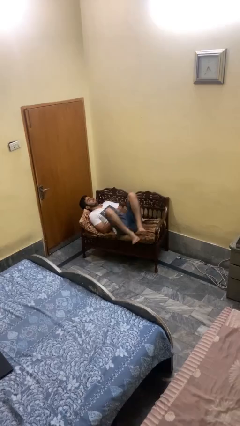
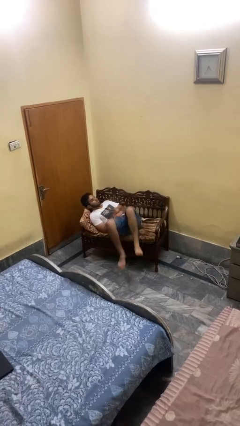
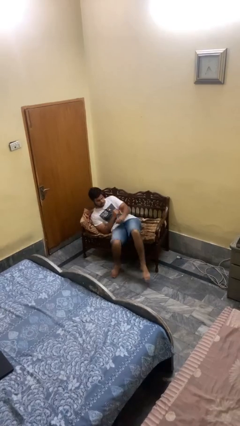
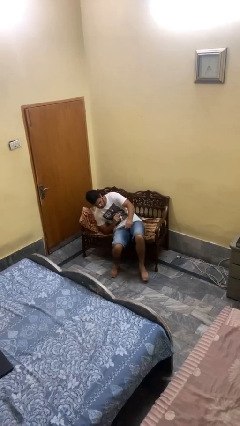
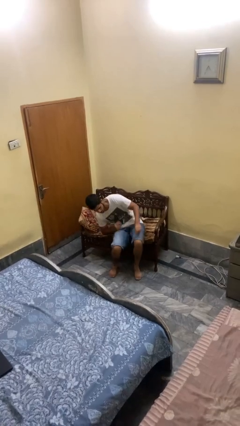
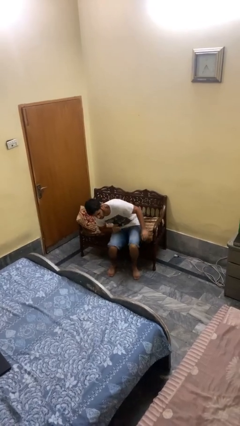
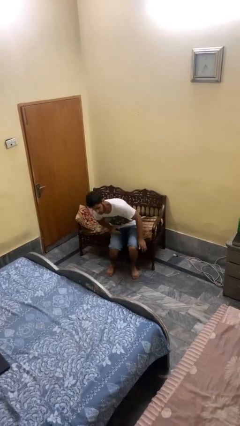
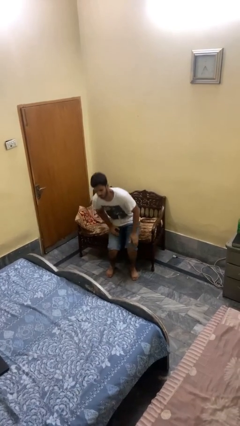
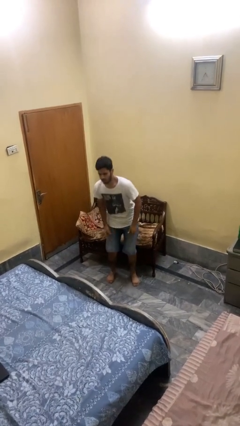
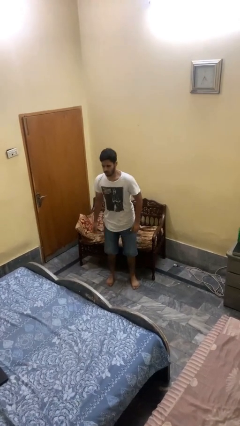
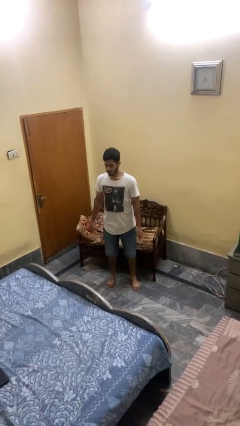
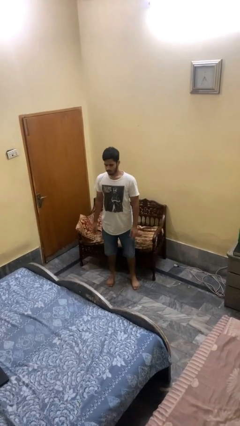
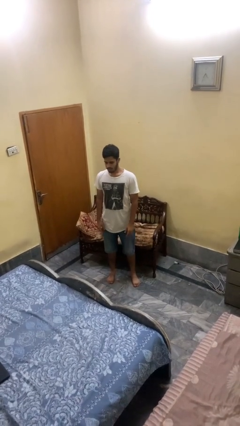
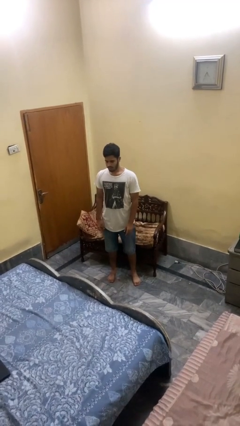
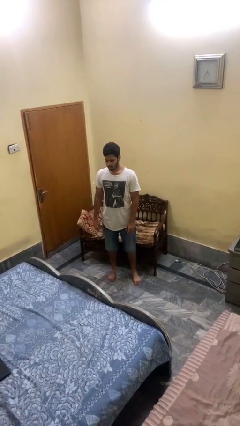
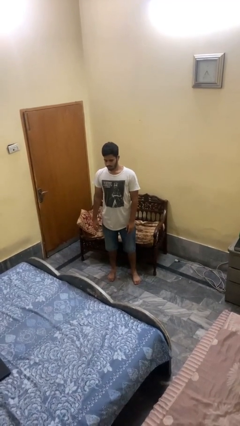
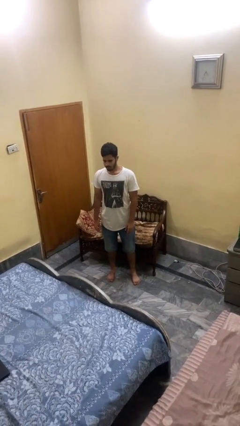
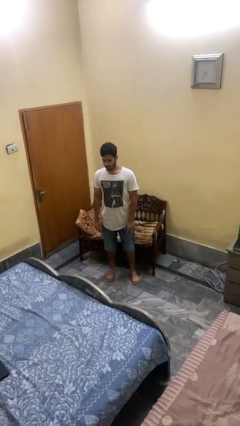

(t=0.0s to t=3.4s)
person stands up

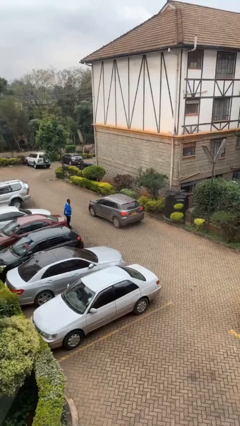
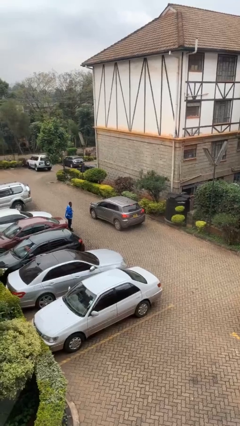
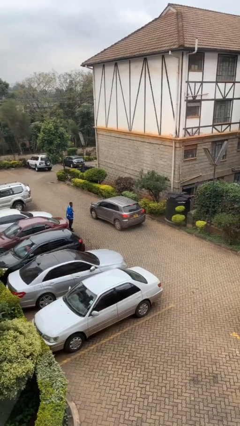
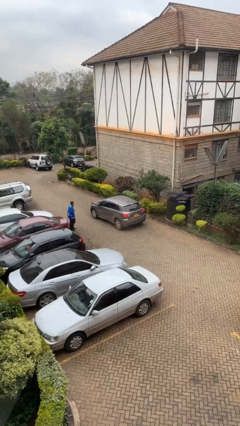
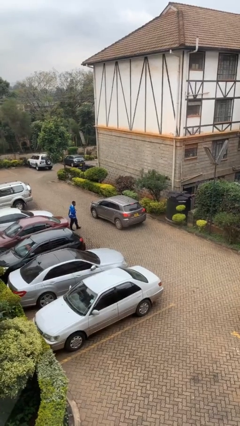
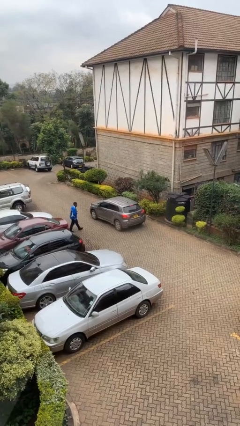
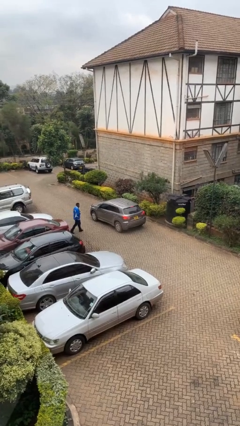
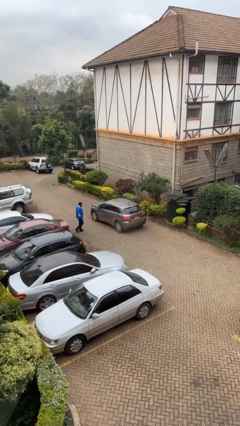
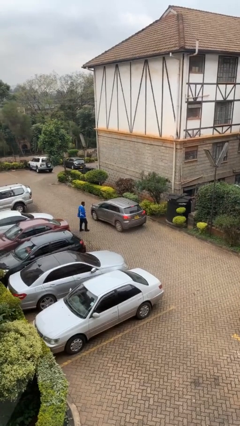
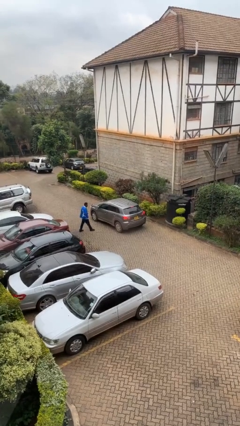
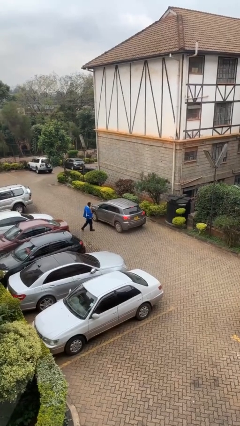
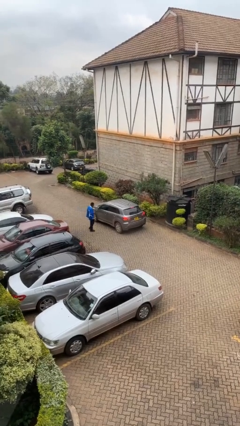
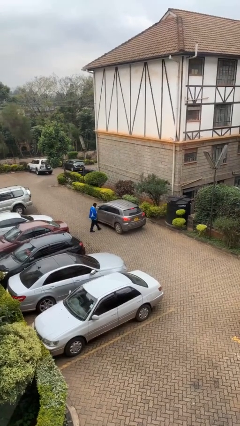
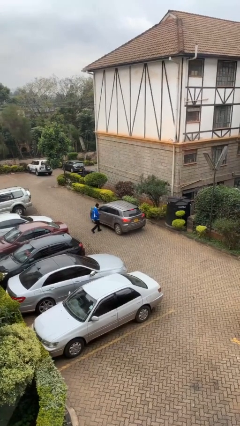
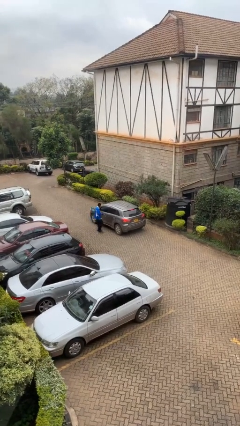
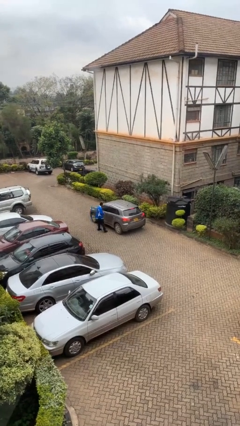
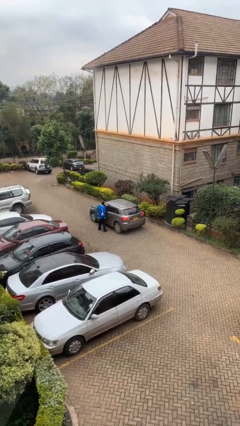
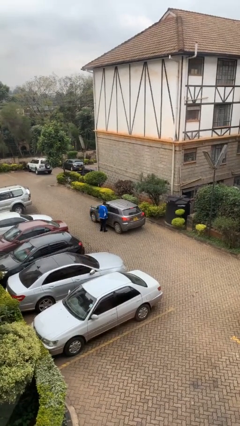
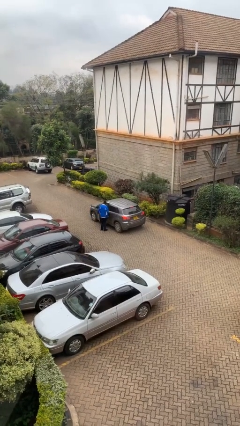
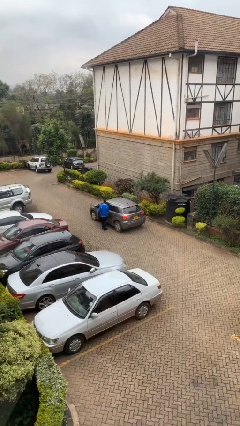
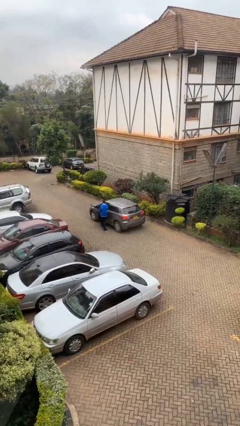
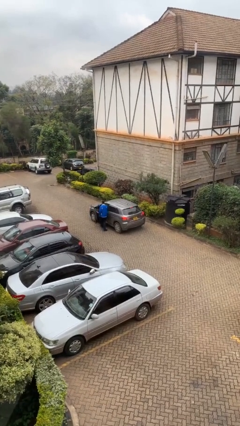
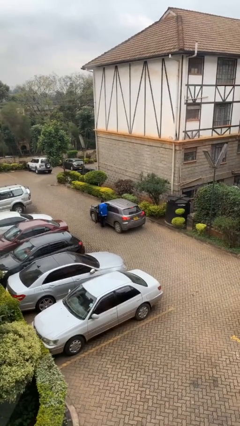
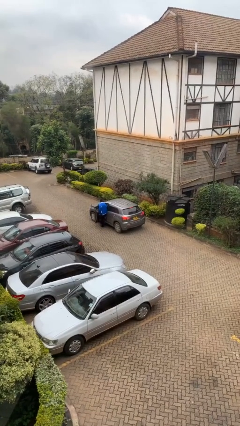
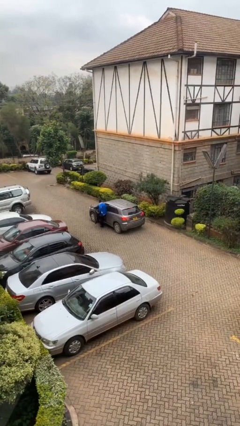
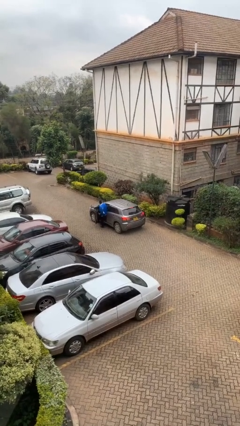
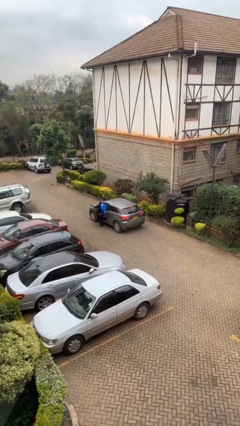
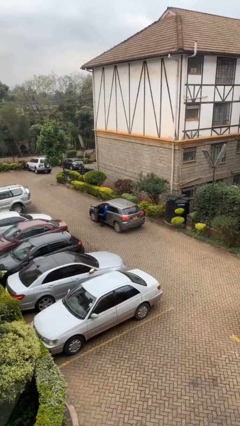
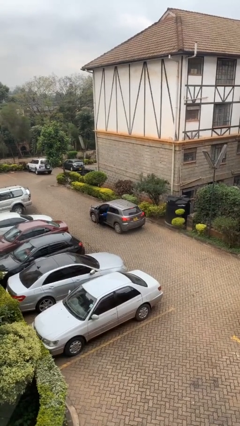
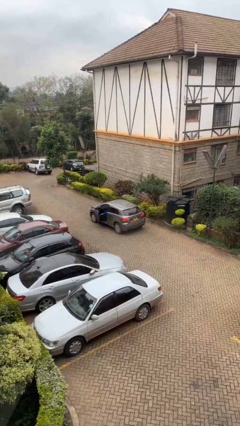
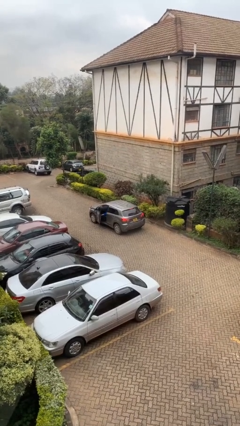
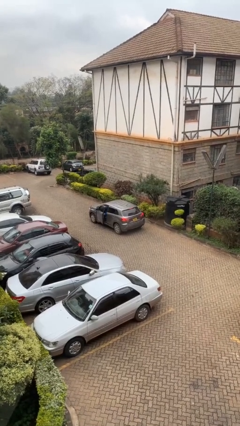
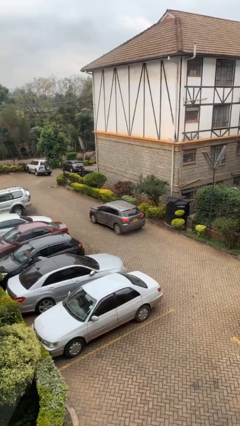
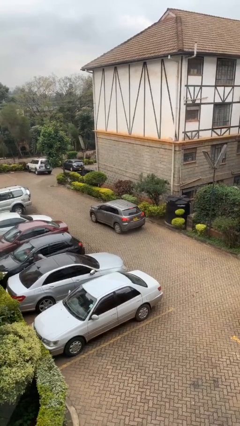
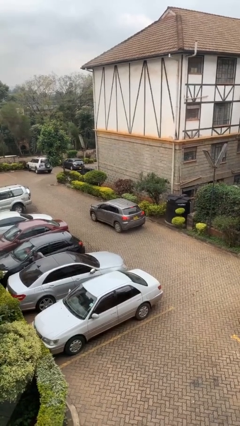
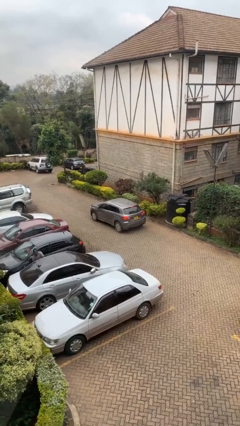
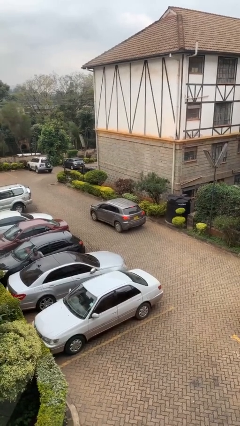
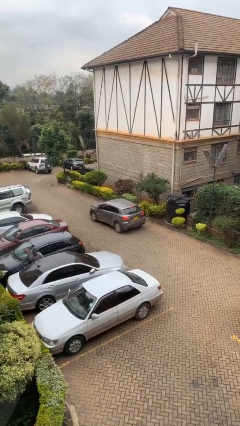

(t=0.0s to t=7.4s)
car picks up person

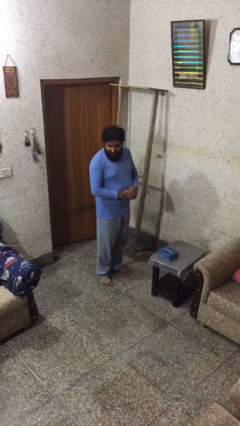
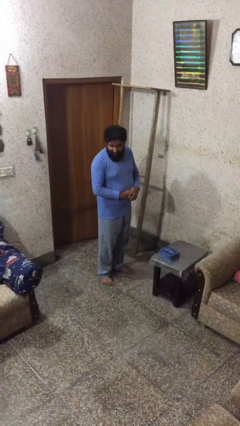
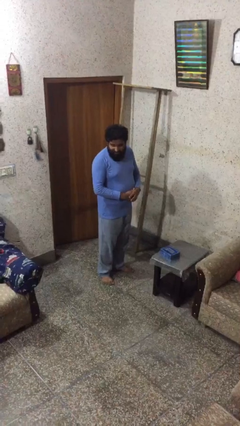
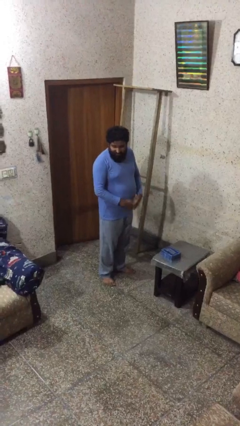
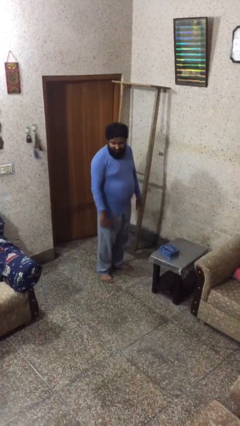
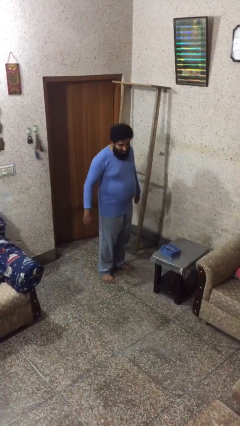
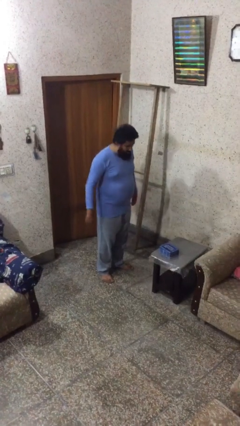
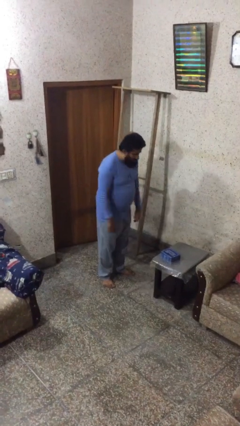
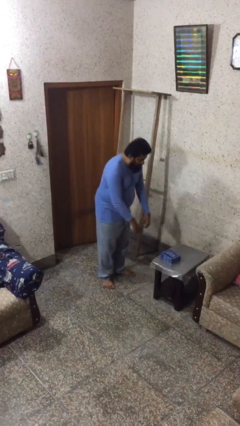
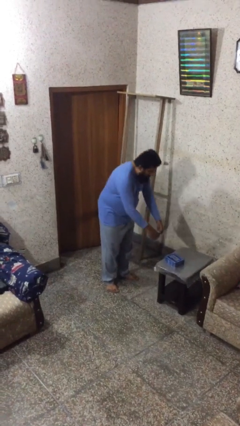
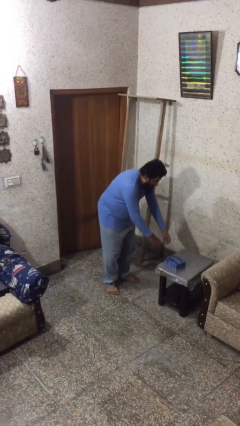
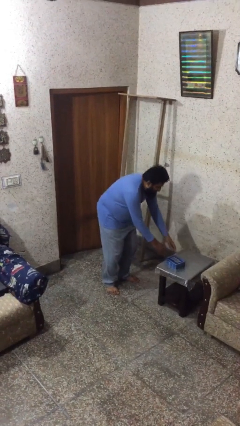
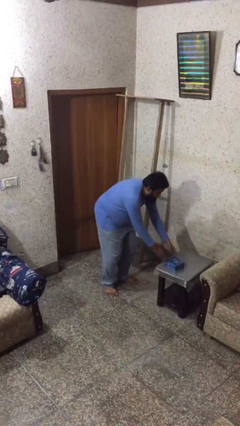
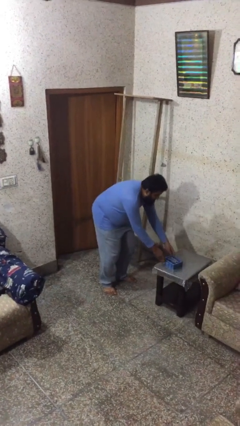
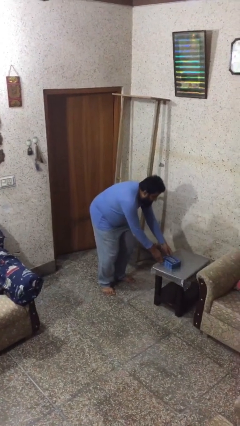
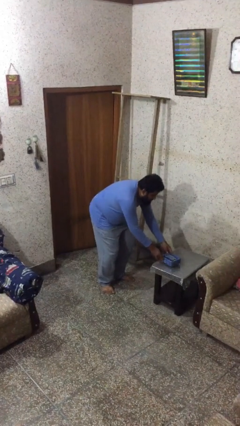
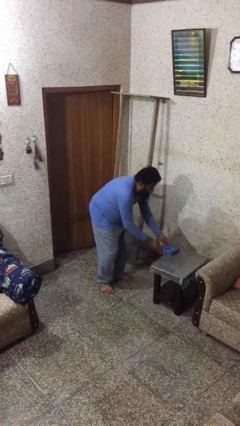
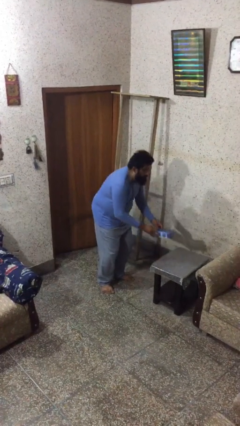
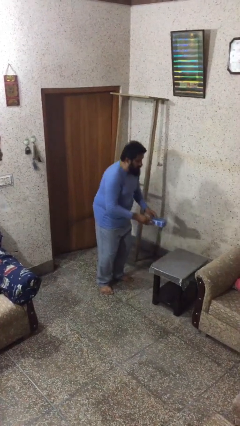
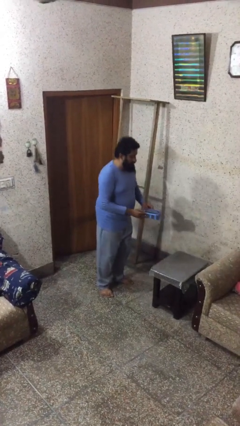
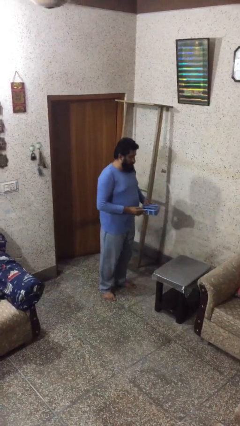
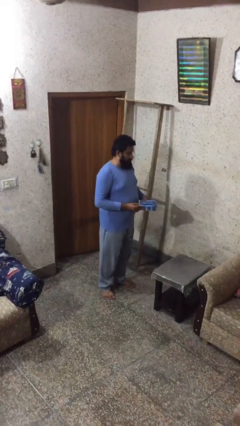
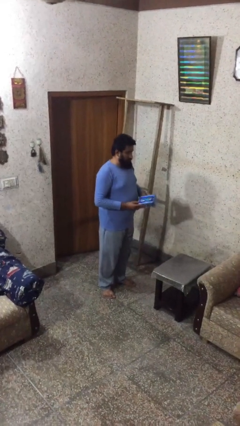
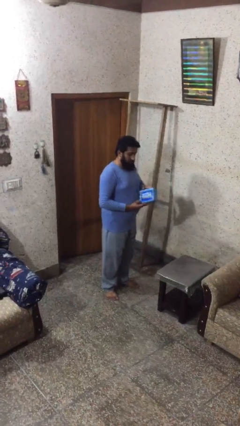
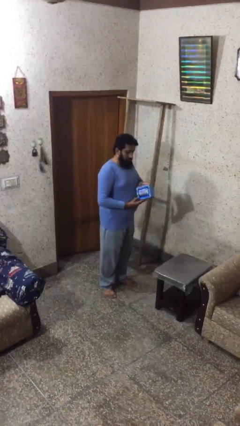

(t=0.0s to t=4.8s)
person picks up object from table

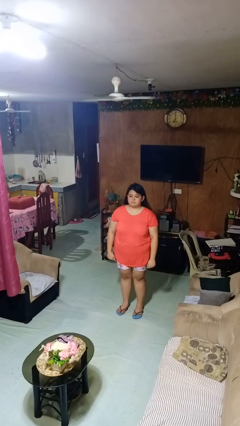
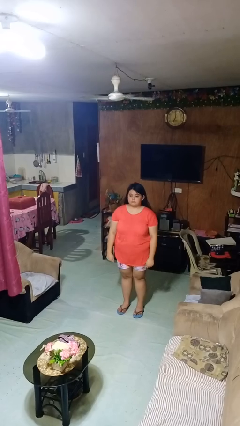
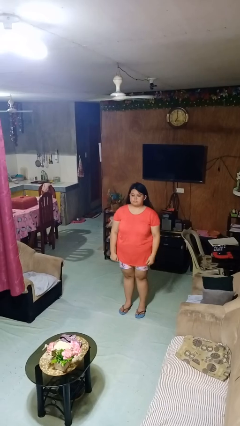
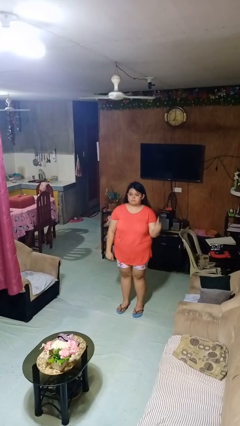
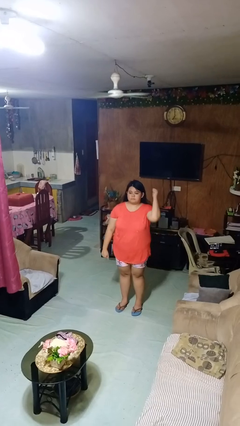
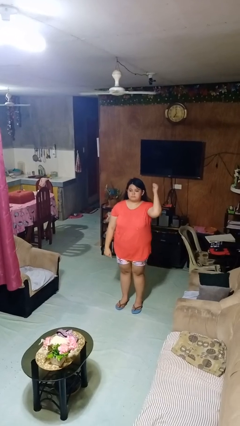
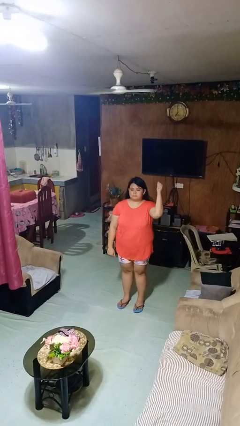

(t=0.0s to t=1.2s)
person gestures behind me

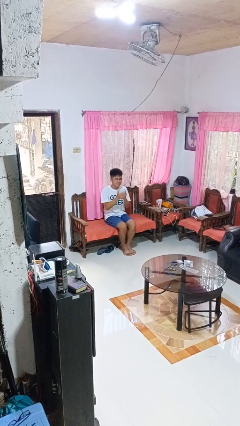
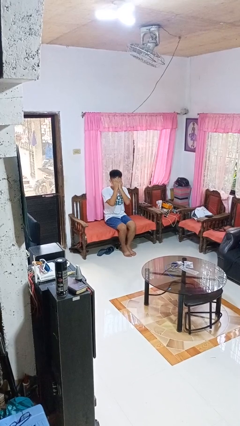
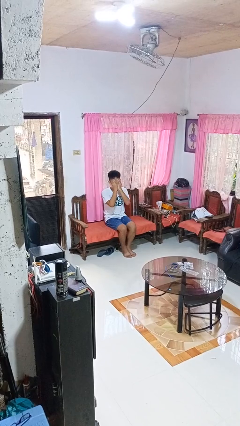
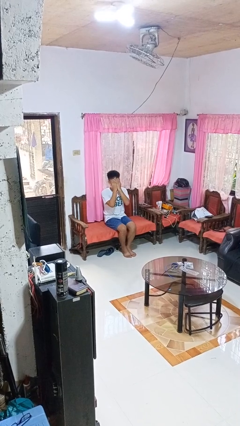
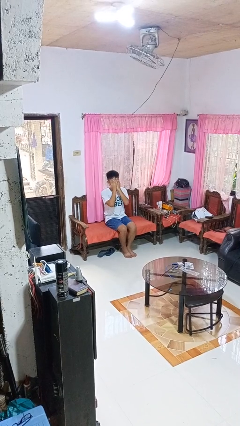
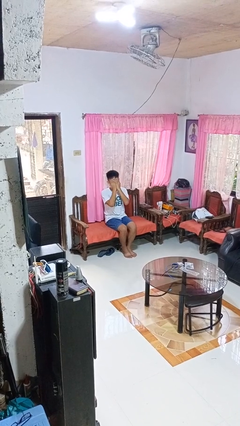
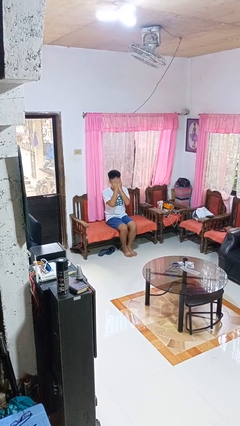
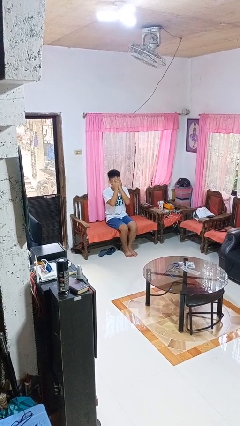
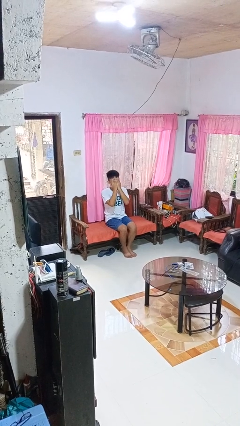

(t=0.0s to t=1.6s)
person covers face with hands
